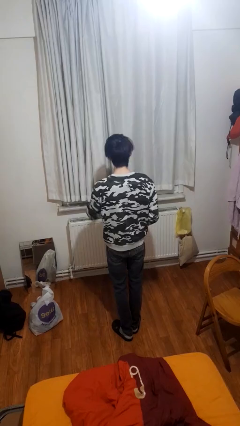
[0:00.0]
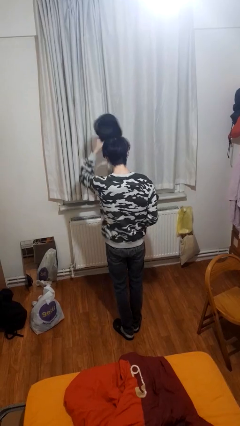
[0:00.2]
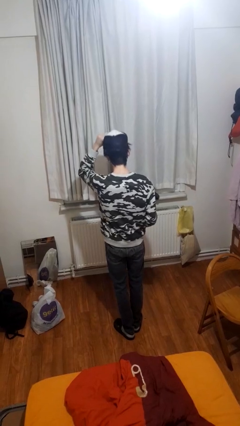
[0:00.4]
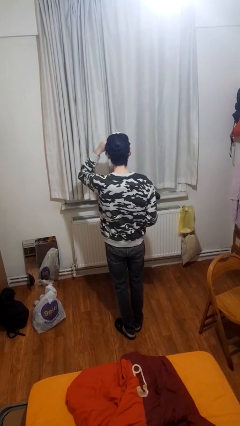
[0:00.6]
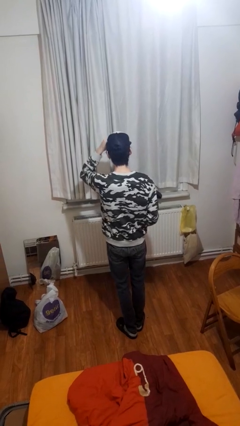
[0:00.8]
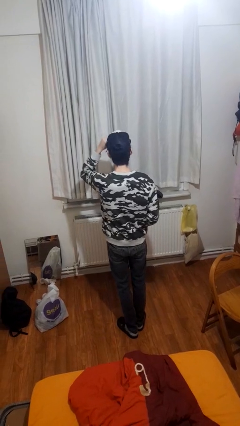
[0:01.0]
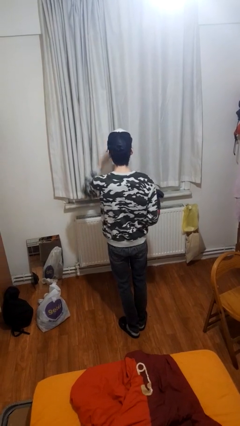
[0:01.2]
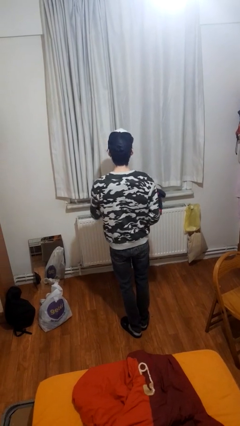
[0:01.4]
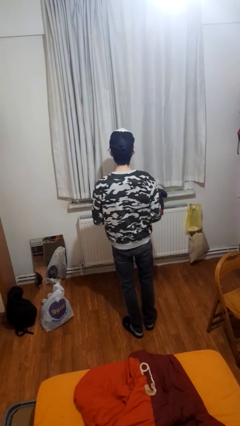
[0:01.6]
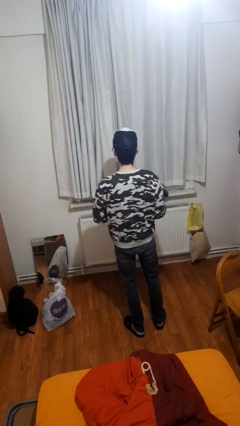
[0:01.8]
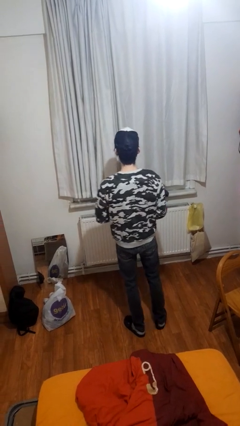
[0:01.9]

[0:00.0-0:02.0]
person puts on hat

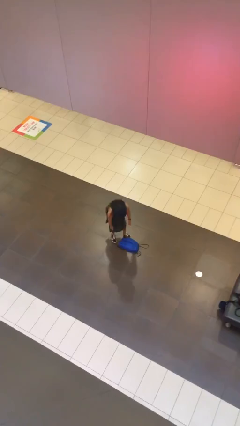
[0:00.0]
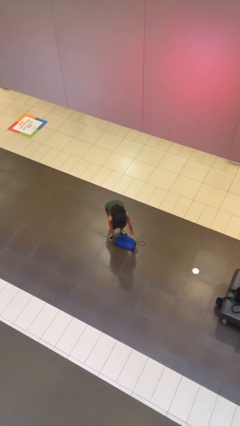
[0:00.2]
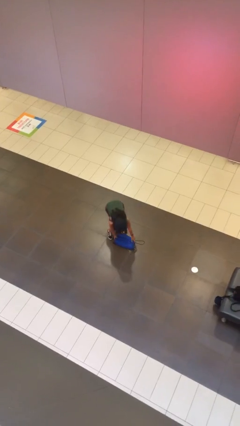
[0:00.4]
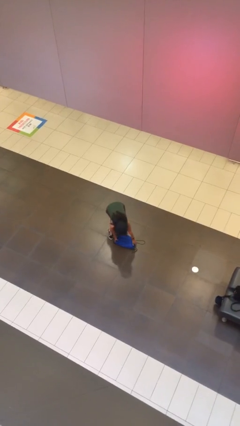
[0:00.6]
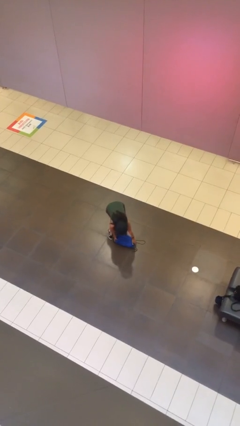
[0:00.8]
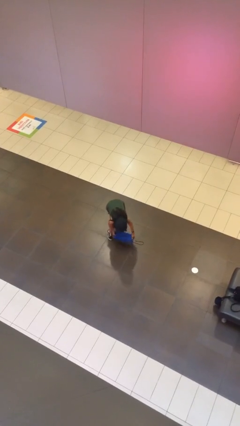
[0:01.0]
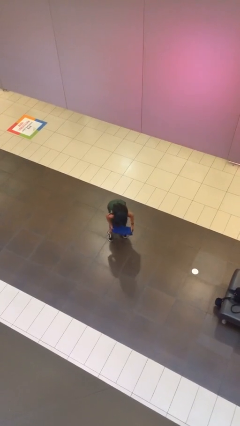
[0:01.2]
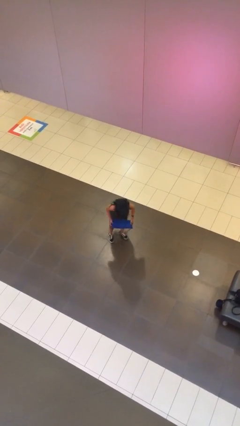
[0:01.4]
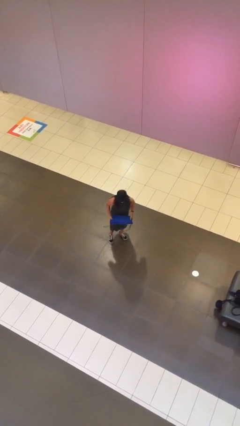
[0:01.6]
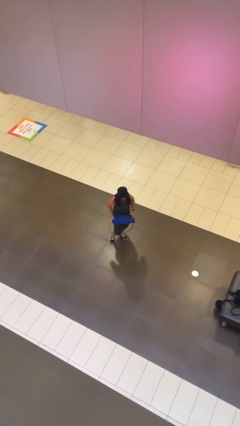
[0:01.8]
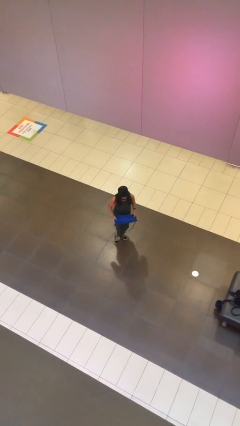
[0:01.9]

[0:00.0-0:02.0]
person picks up object from floor

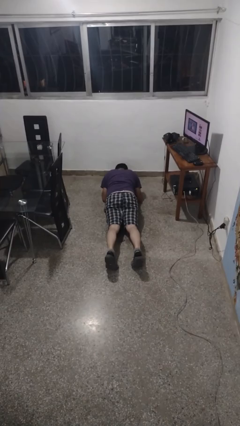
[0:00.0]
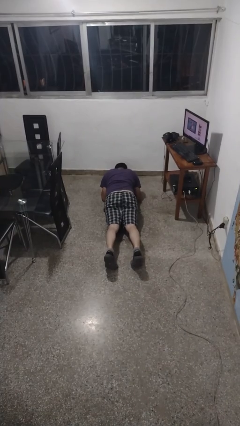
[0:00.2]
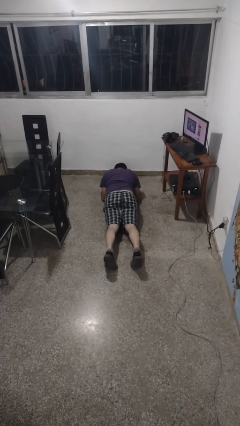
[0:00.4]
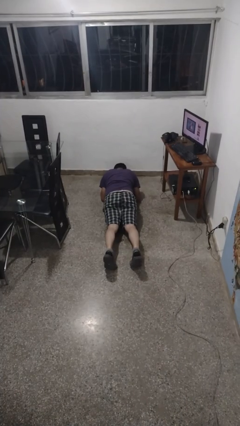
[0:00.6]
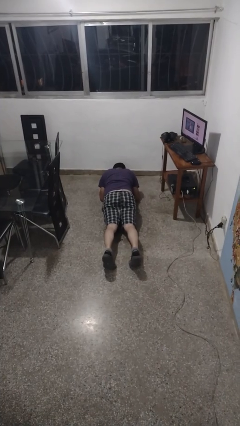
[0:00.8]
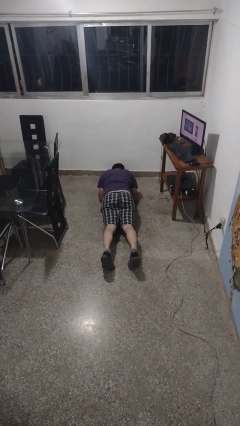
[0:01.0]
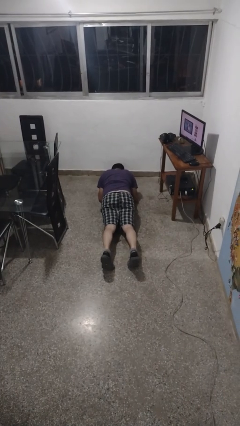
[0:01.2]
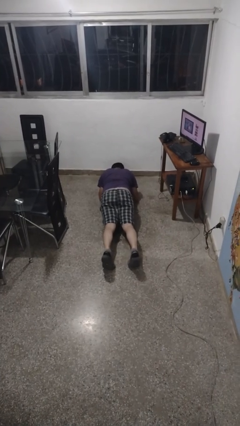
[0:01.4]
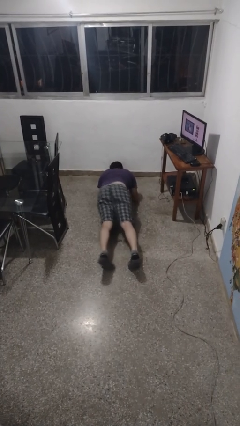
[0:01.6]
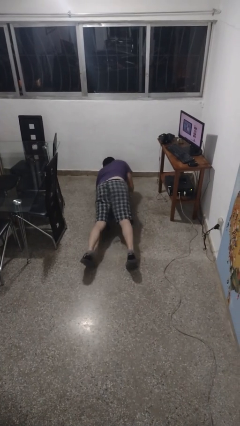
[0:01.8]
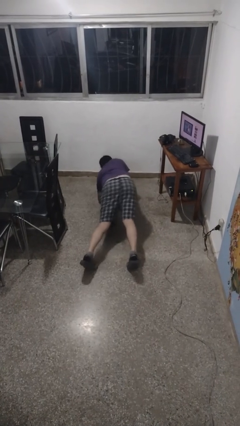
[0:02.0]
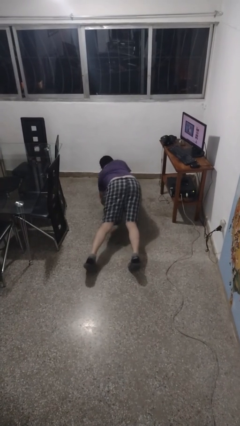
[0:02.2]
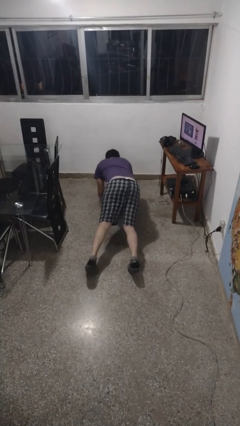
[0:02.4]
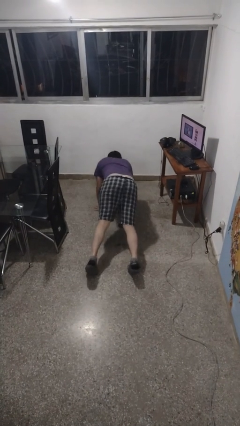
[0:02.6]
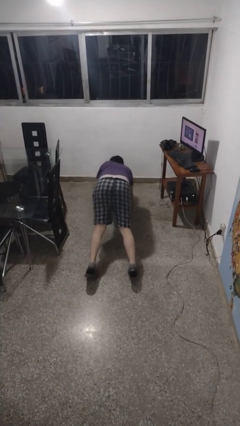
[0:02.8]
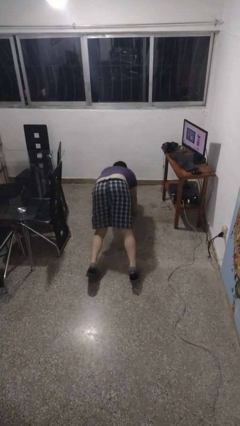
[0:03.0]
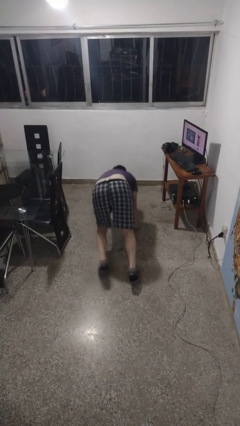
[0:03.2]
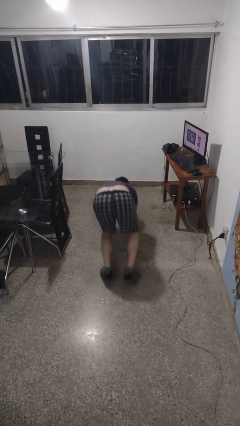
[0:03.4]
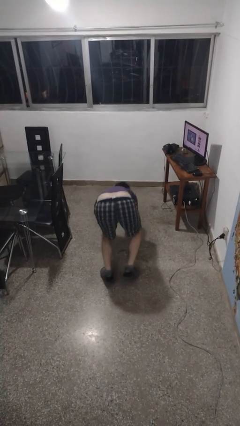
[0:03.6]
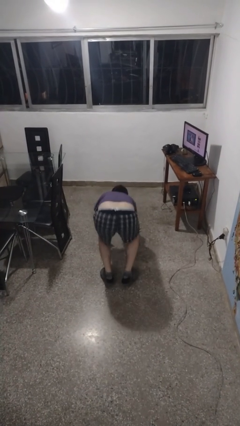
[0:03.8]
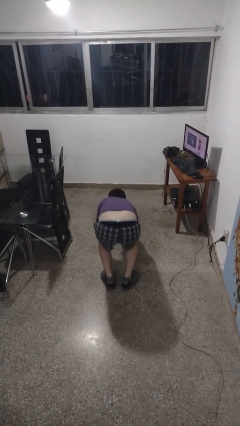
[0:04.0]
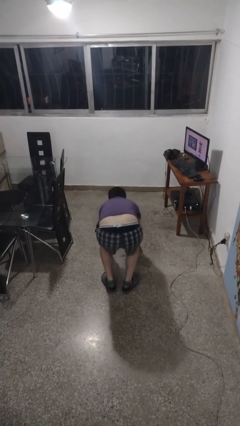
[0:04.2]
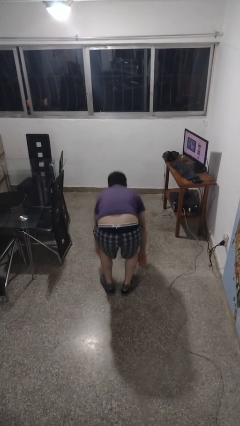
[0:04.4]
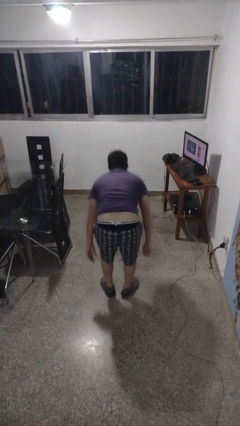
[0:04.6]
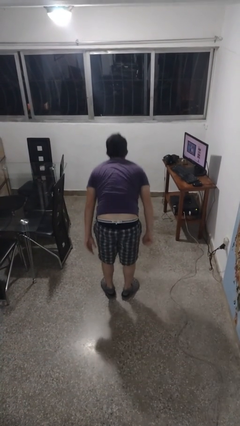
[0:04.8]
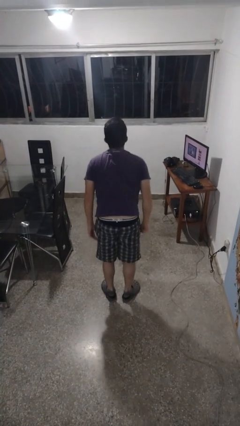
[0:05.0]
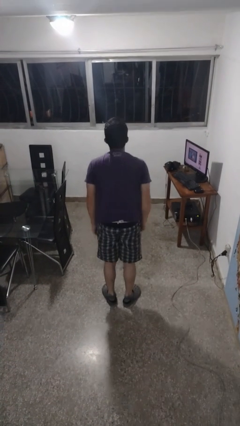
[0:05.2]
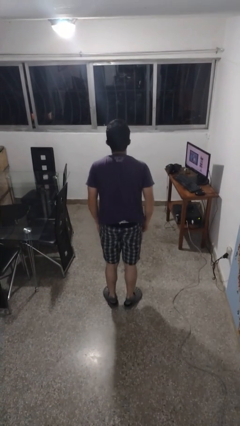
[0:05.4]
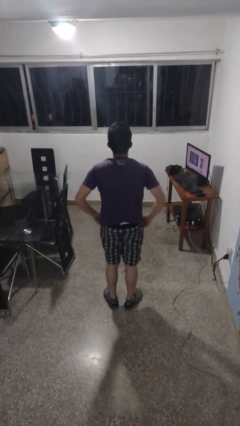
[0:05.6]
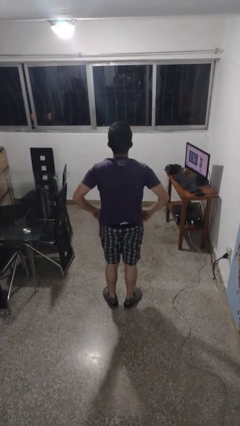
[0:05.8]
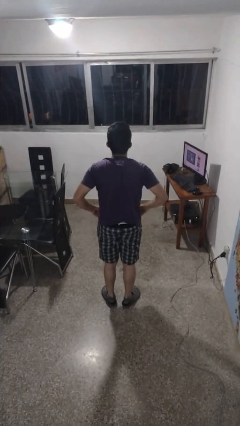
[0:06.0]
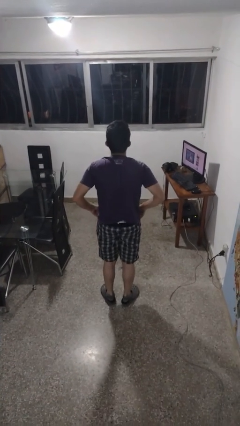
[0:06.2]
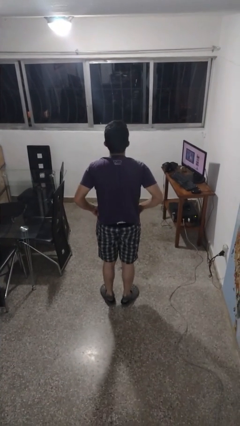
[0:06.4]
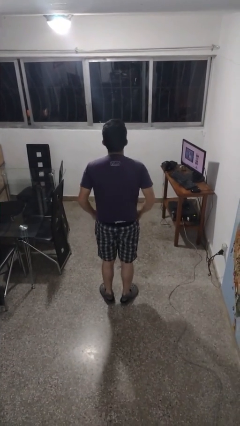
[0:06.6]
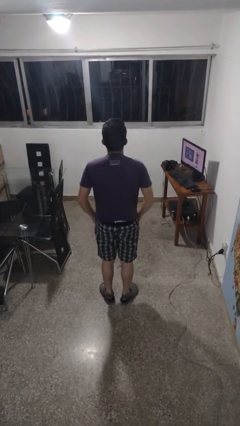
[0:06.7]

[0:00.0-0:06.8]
person stands up from floor

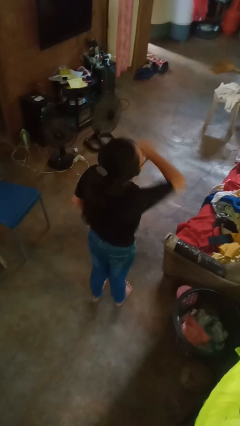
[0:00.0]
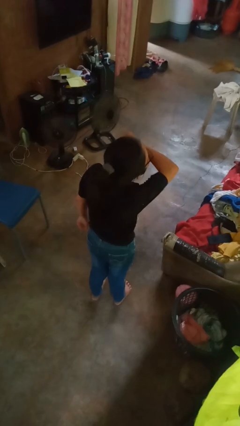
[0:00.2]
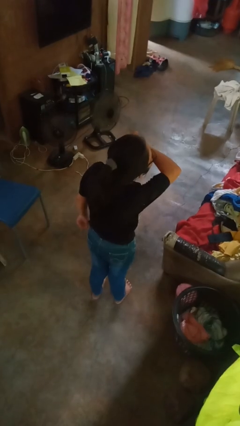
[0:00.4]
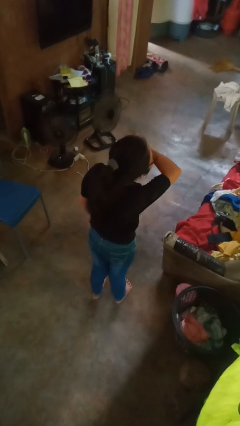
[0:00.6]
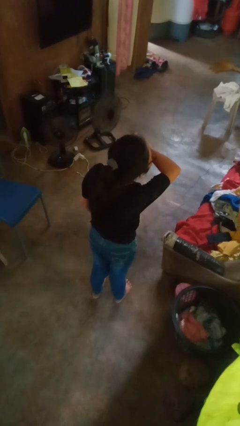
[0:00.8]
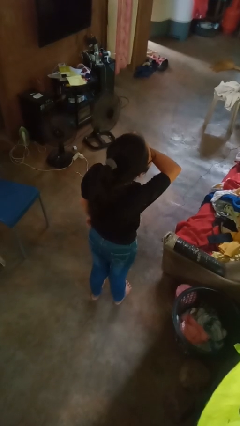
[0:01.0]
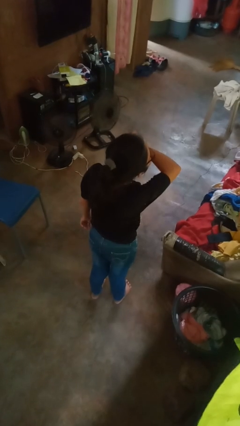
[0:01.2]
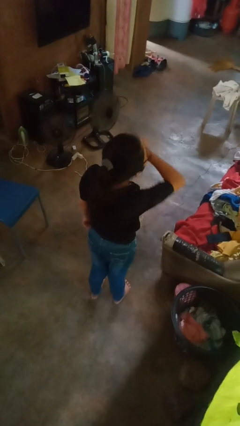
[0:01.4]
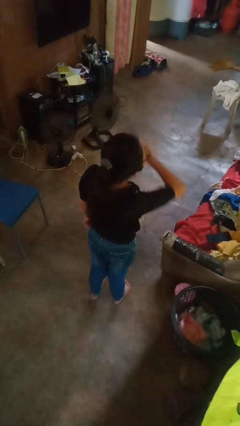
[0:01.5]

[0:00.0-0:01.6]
person sneezes into arm

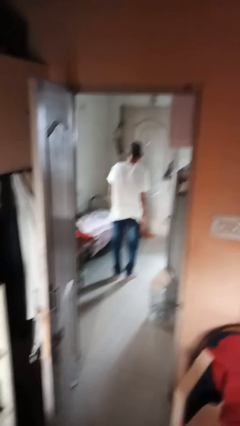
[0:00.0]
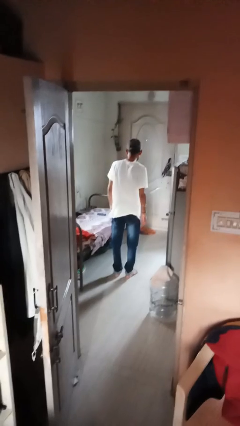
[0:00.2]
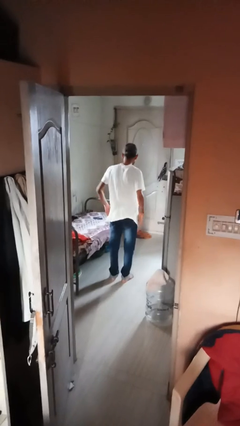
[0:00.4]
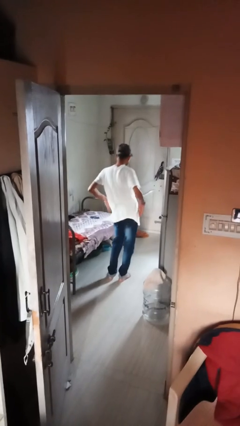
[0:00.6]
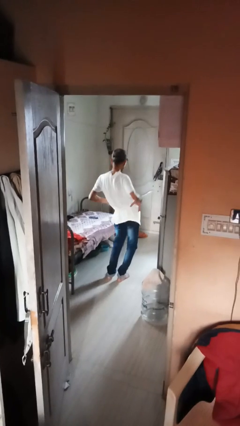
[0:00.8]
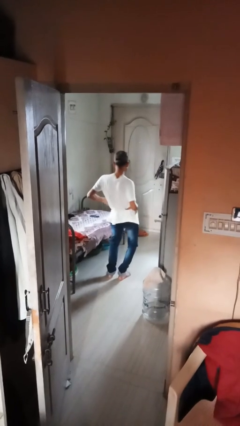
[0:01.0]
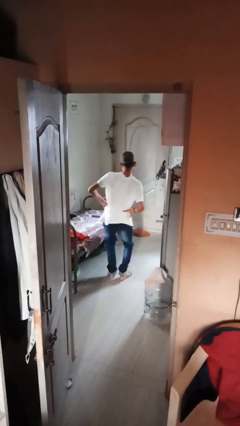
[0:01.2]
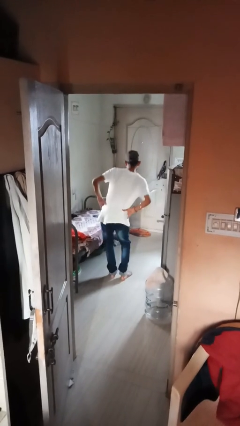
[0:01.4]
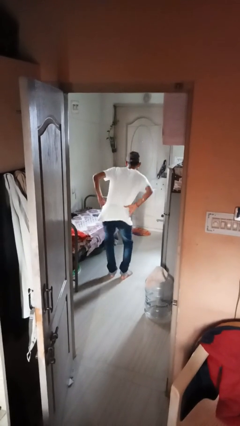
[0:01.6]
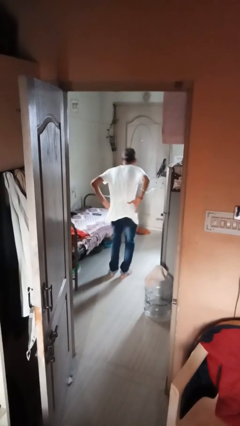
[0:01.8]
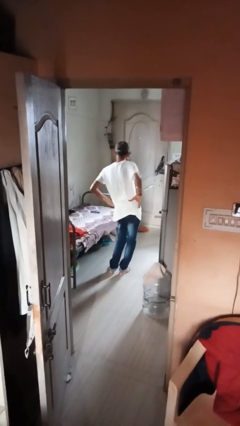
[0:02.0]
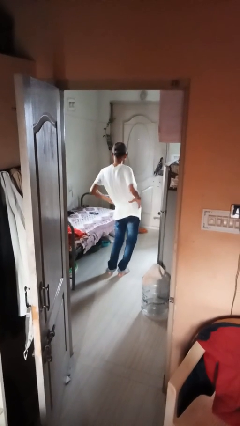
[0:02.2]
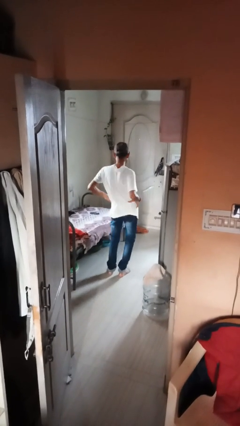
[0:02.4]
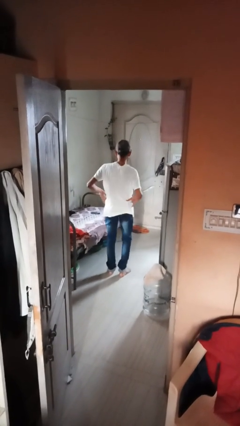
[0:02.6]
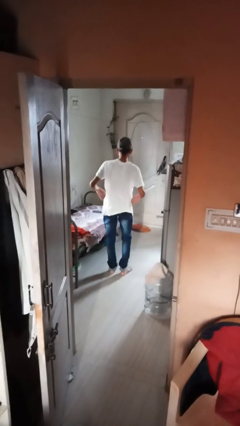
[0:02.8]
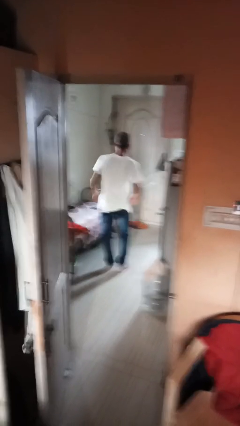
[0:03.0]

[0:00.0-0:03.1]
person wiggles hips

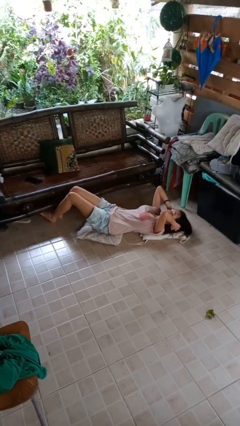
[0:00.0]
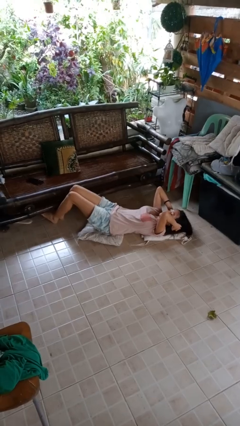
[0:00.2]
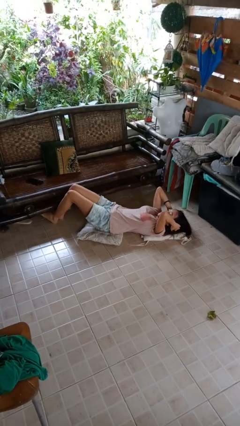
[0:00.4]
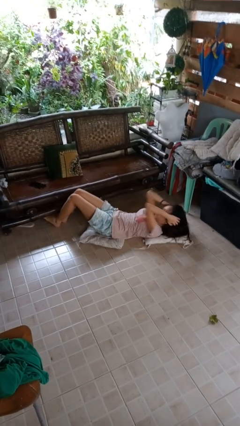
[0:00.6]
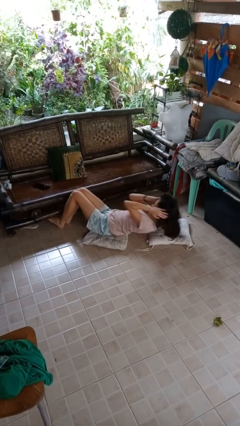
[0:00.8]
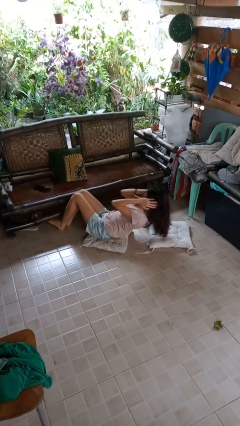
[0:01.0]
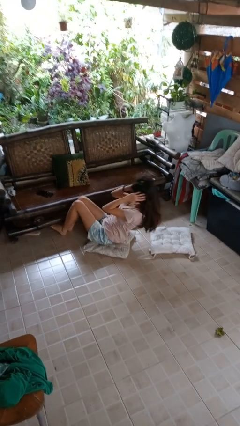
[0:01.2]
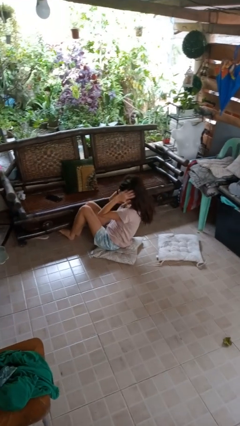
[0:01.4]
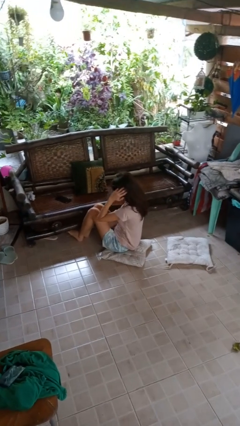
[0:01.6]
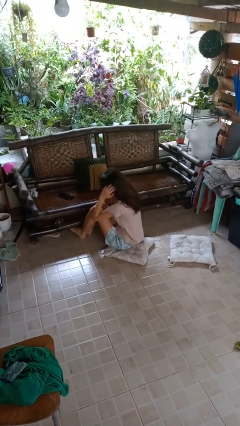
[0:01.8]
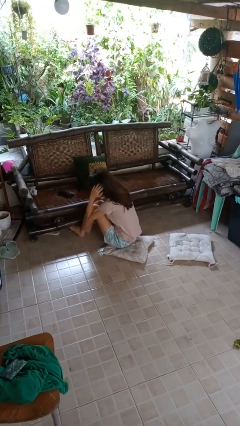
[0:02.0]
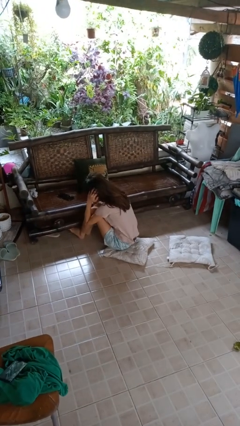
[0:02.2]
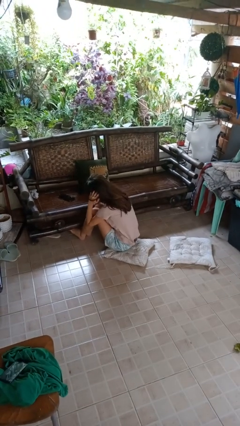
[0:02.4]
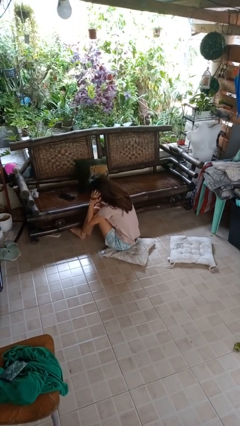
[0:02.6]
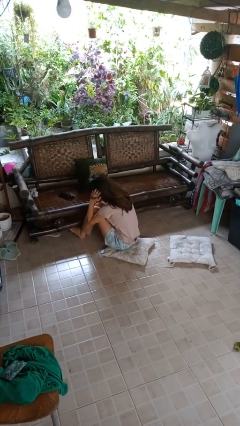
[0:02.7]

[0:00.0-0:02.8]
person exercises with situp
